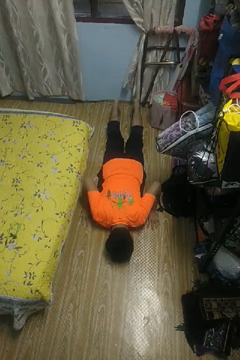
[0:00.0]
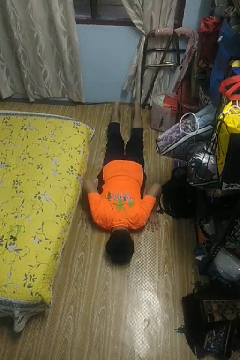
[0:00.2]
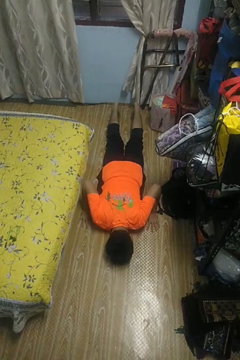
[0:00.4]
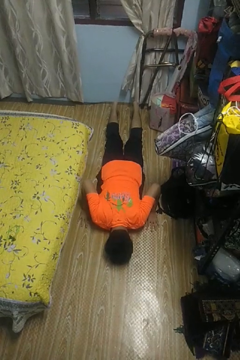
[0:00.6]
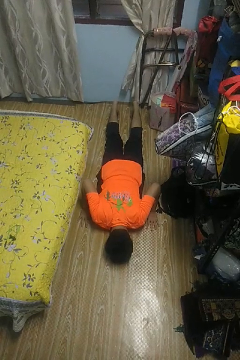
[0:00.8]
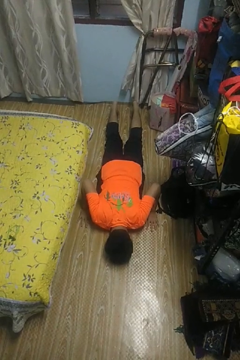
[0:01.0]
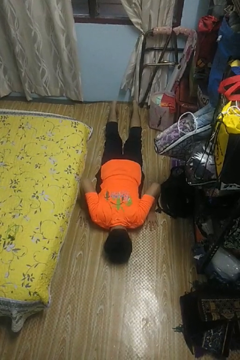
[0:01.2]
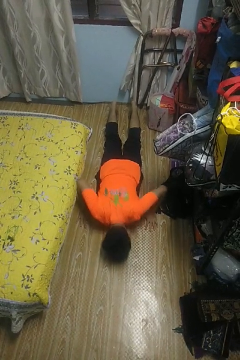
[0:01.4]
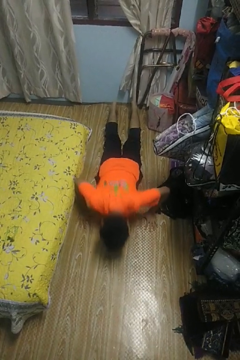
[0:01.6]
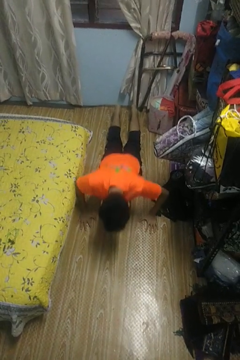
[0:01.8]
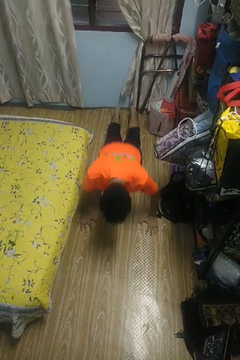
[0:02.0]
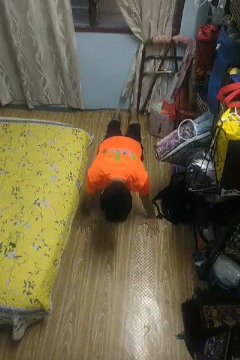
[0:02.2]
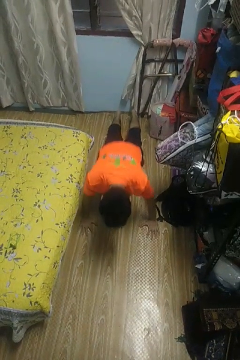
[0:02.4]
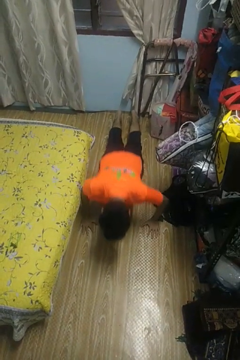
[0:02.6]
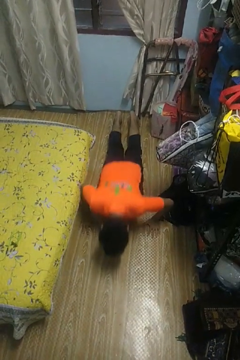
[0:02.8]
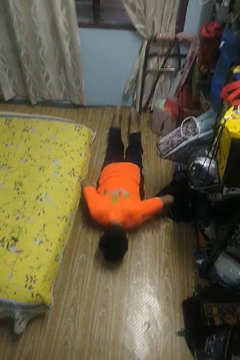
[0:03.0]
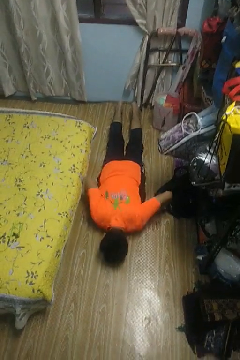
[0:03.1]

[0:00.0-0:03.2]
person exercises with pushup

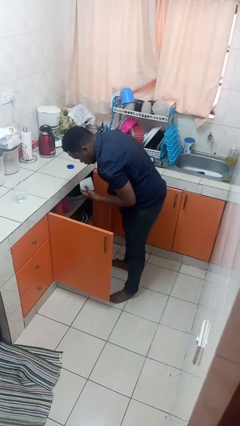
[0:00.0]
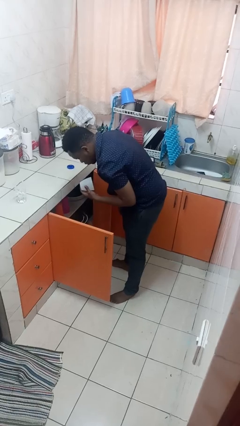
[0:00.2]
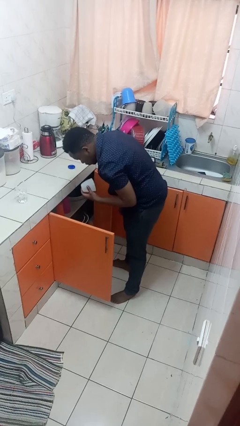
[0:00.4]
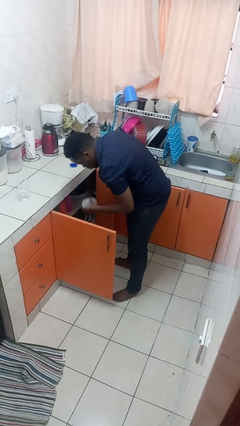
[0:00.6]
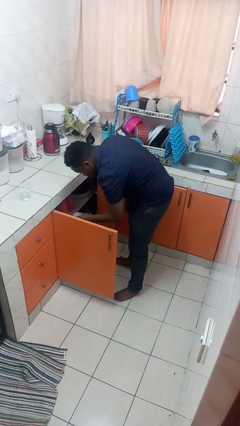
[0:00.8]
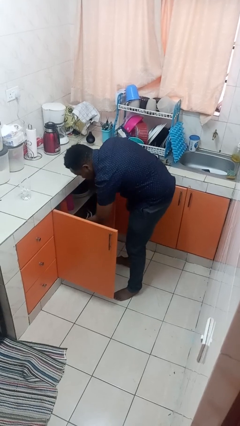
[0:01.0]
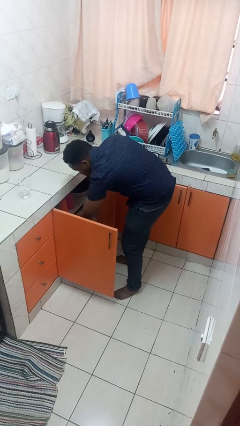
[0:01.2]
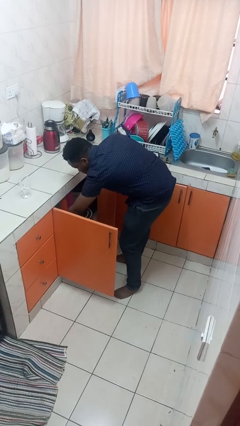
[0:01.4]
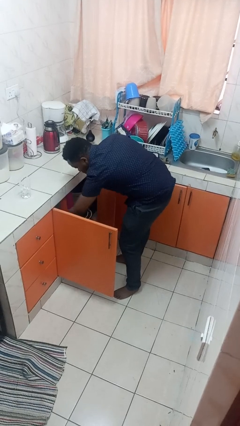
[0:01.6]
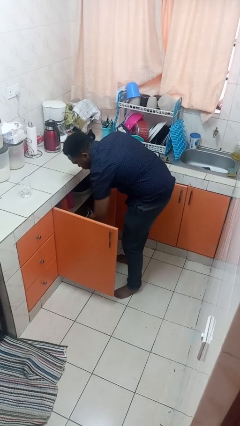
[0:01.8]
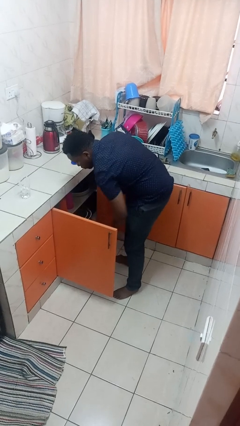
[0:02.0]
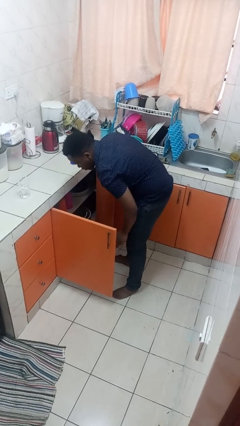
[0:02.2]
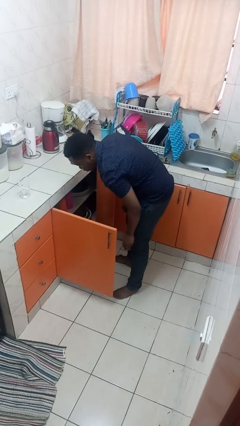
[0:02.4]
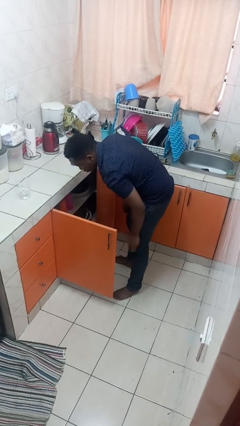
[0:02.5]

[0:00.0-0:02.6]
person puts object in cabinet

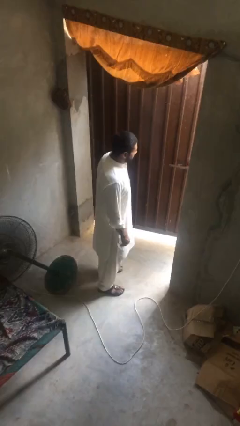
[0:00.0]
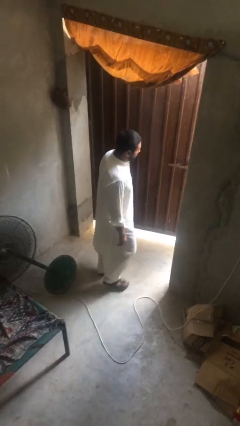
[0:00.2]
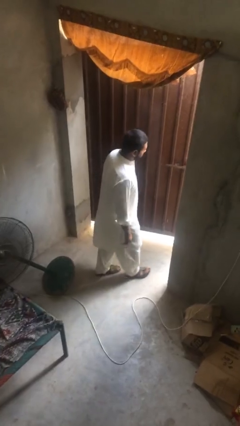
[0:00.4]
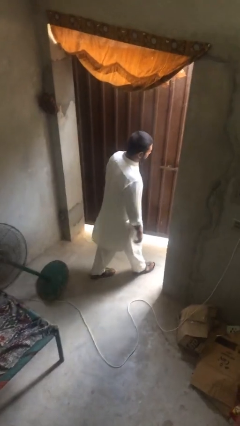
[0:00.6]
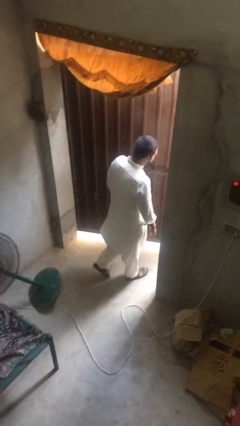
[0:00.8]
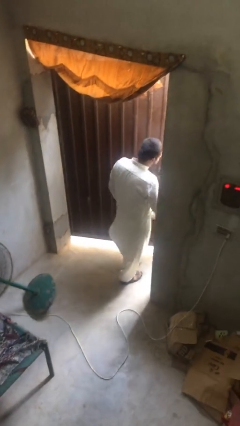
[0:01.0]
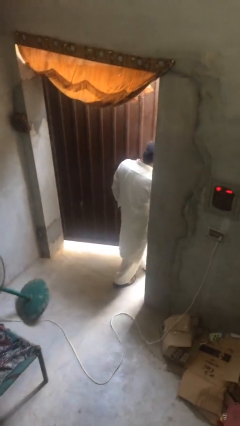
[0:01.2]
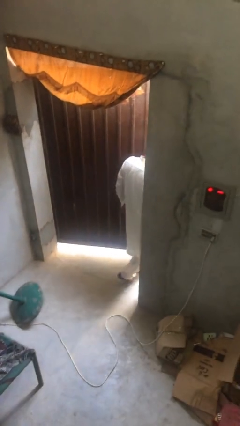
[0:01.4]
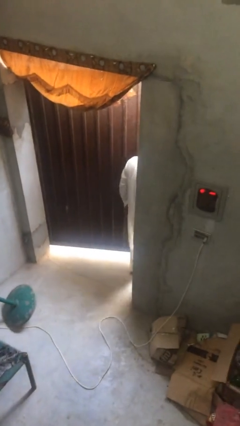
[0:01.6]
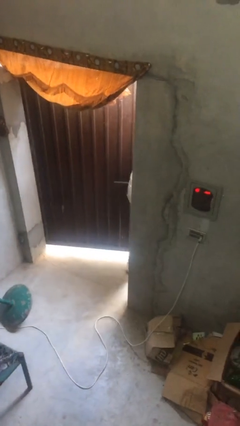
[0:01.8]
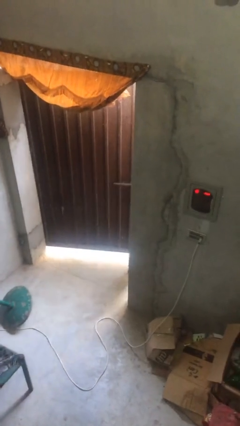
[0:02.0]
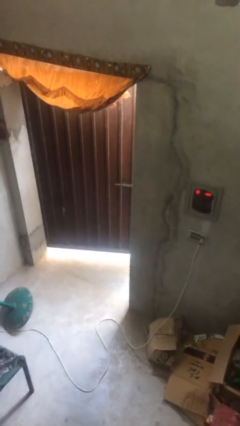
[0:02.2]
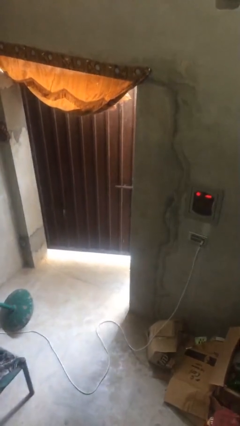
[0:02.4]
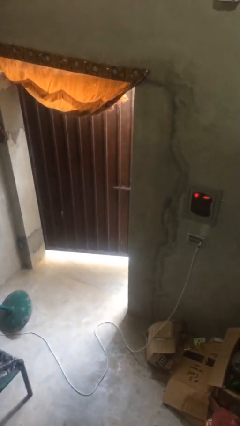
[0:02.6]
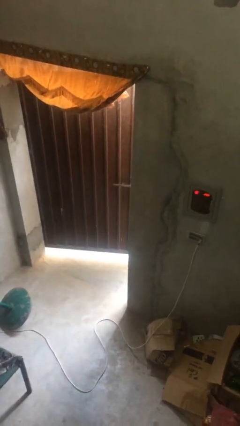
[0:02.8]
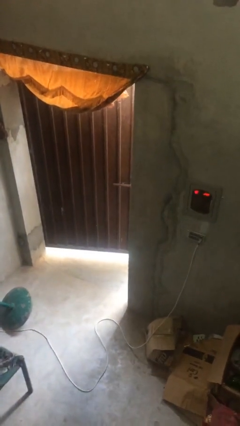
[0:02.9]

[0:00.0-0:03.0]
person exits scene through structure

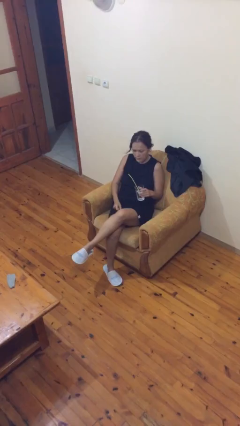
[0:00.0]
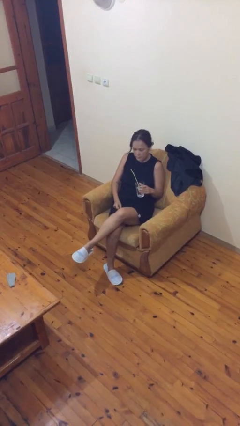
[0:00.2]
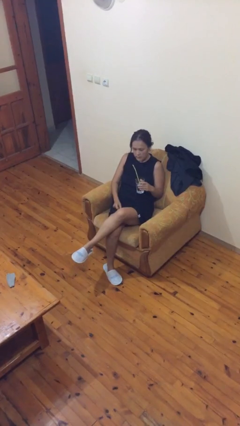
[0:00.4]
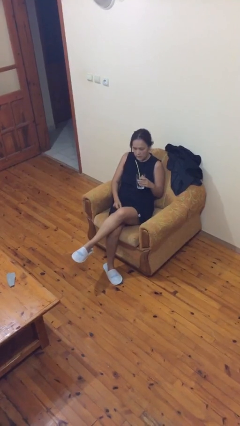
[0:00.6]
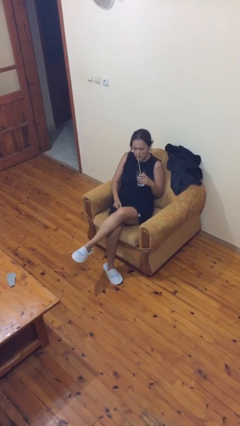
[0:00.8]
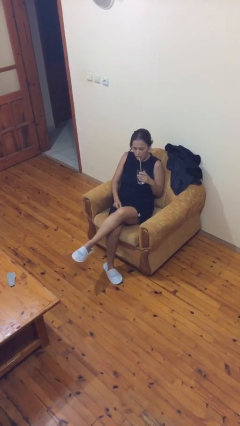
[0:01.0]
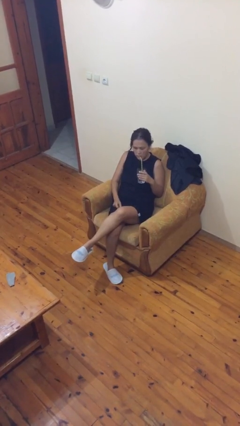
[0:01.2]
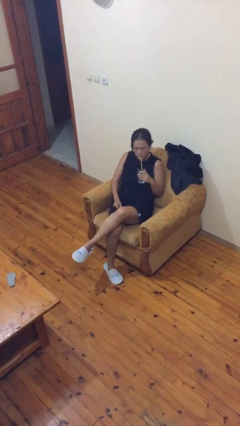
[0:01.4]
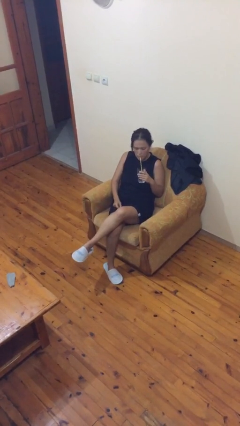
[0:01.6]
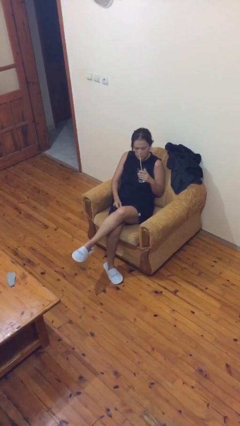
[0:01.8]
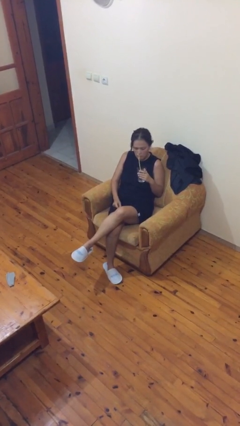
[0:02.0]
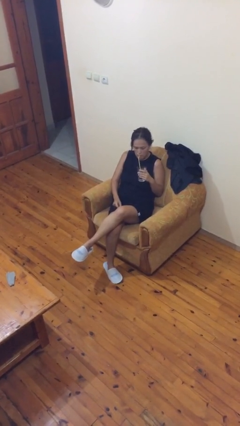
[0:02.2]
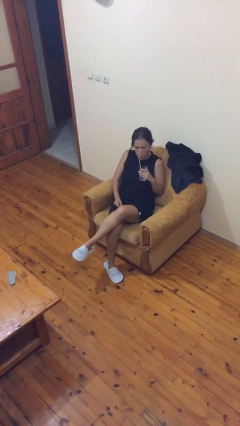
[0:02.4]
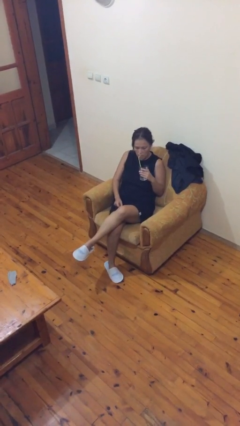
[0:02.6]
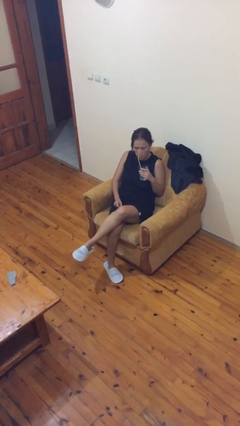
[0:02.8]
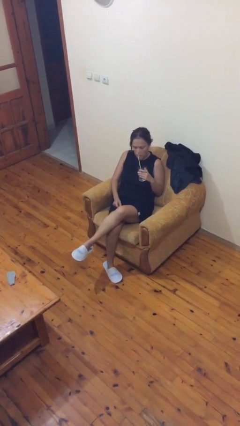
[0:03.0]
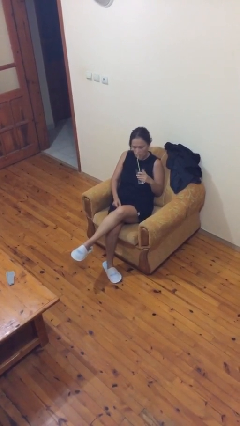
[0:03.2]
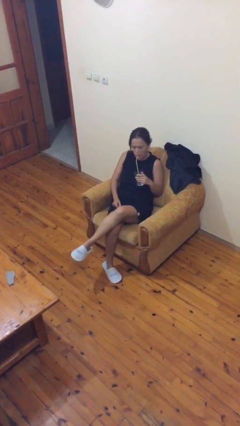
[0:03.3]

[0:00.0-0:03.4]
person drinks from straw

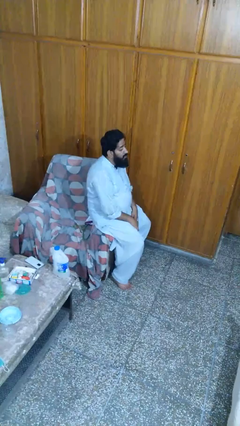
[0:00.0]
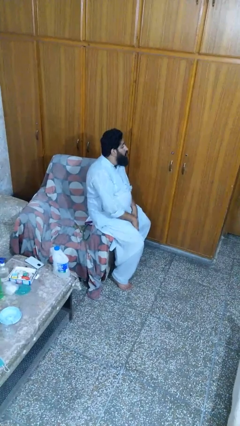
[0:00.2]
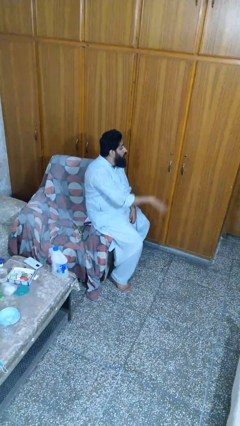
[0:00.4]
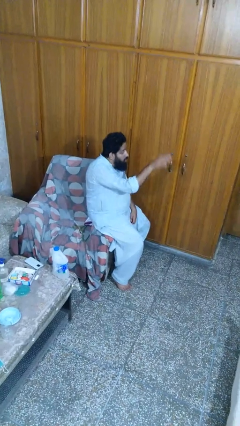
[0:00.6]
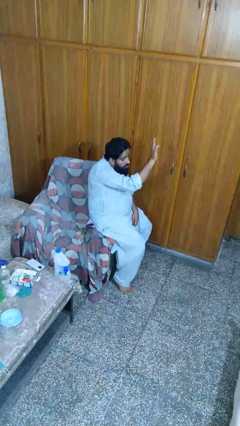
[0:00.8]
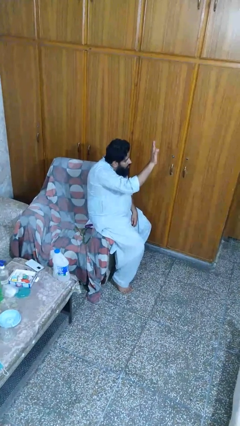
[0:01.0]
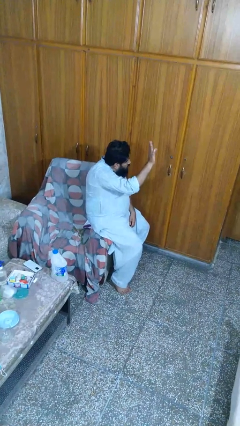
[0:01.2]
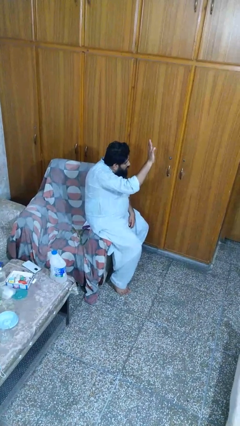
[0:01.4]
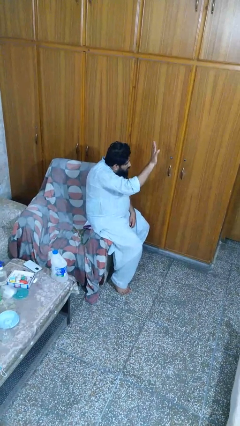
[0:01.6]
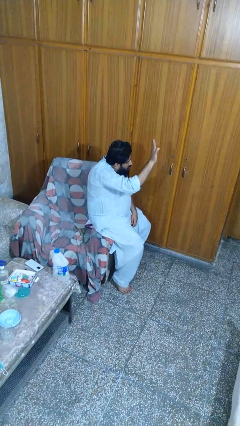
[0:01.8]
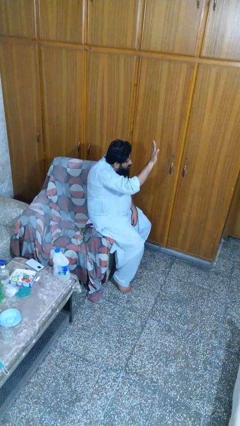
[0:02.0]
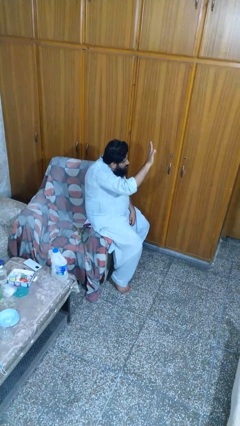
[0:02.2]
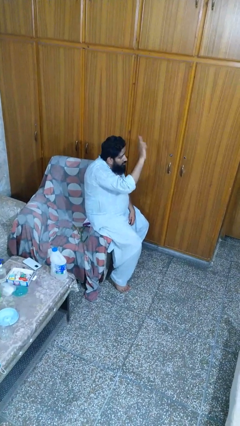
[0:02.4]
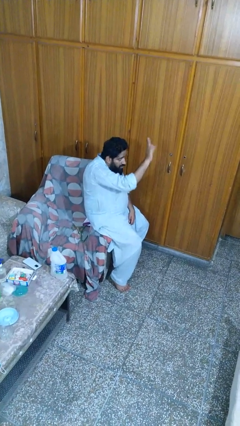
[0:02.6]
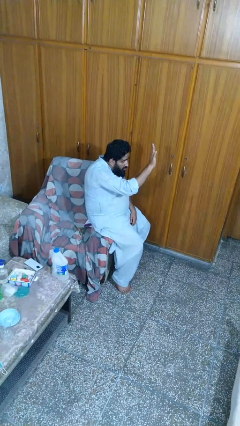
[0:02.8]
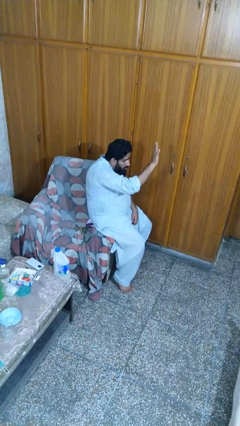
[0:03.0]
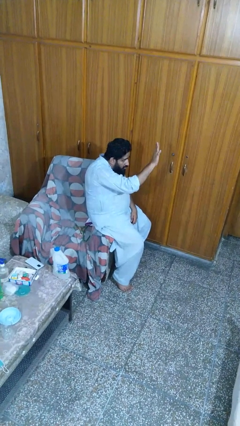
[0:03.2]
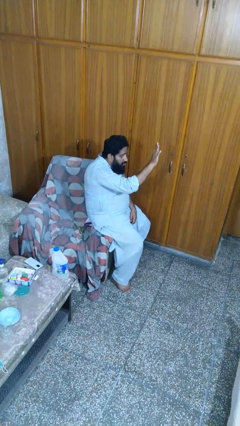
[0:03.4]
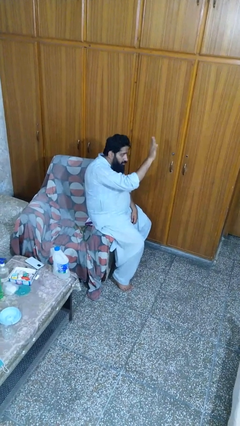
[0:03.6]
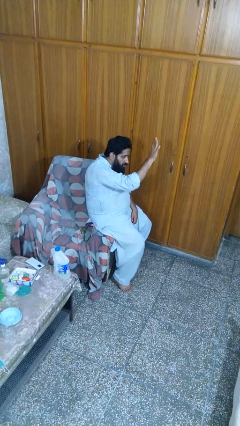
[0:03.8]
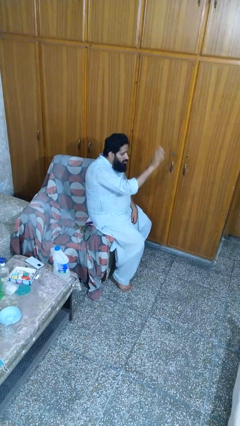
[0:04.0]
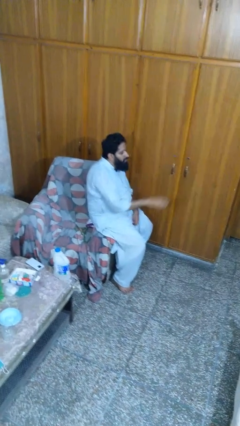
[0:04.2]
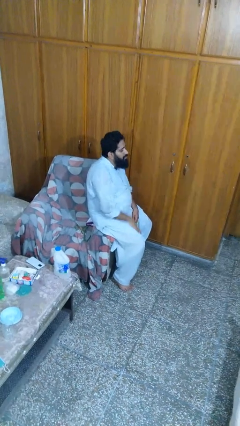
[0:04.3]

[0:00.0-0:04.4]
person waves at person

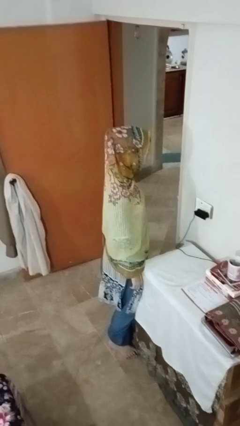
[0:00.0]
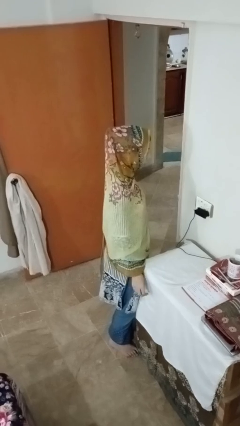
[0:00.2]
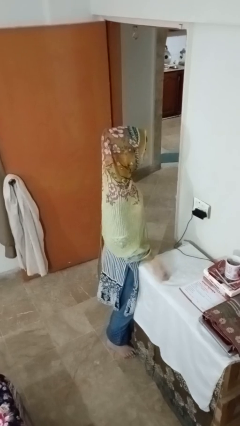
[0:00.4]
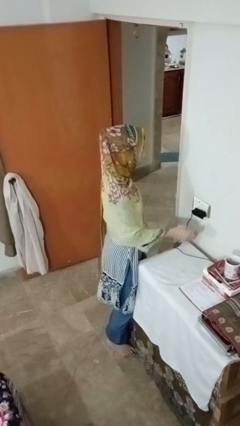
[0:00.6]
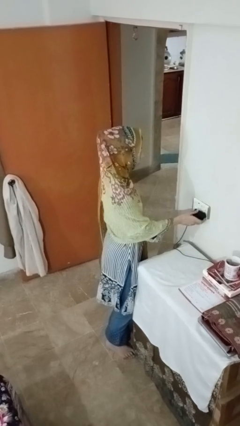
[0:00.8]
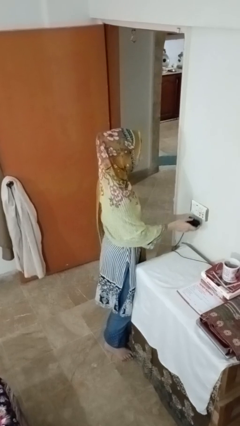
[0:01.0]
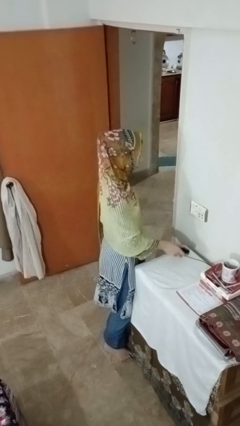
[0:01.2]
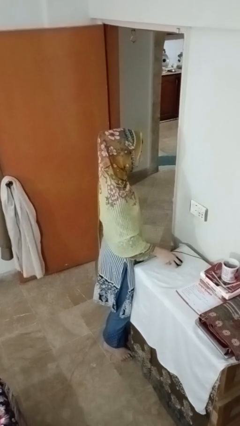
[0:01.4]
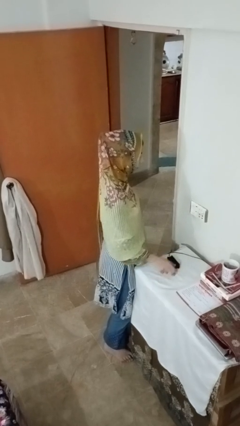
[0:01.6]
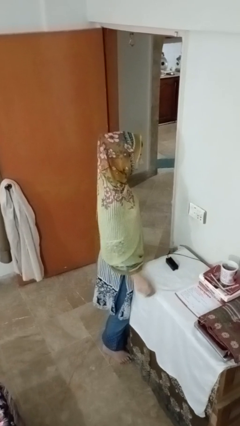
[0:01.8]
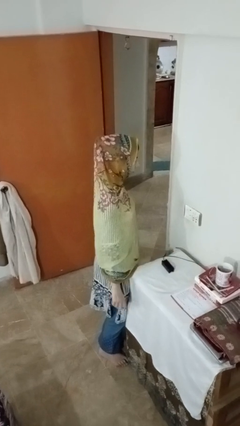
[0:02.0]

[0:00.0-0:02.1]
person unplugs from electrical socket
